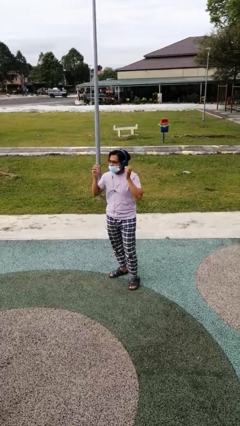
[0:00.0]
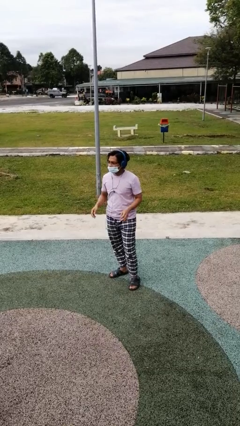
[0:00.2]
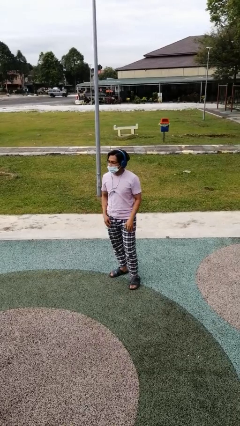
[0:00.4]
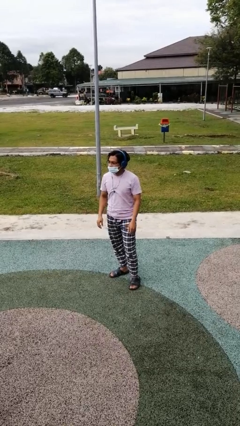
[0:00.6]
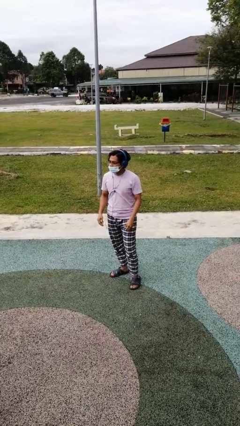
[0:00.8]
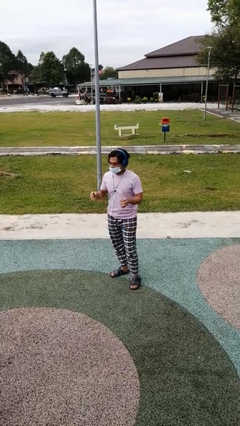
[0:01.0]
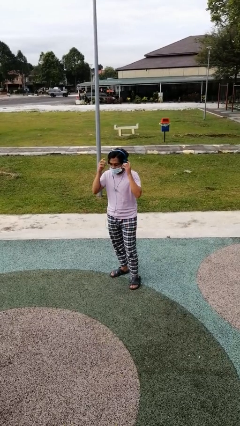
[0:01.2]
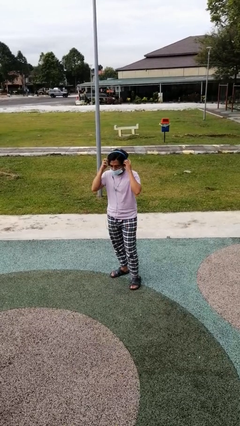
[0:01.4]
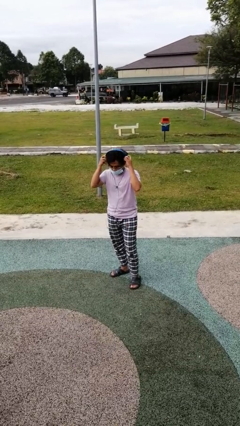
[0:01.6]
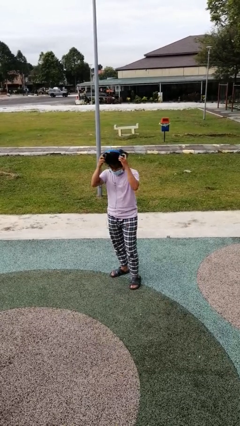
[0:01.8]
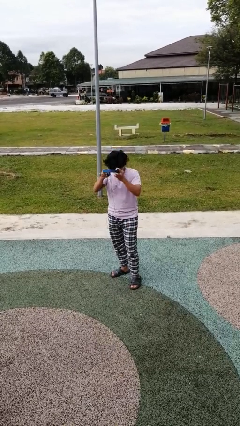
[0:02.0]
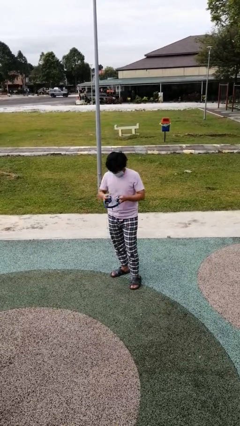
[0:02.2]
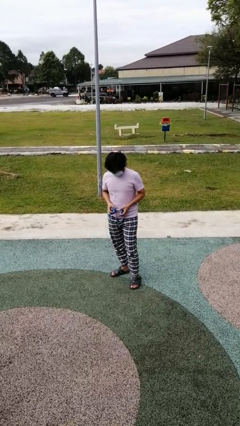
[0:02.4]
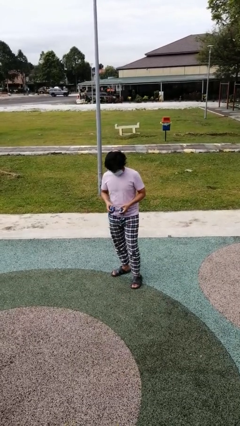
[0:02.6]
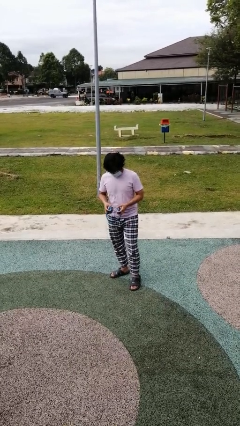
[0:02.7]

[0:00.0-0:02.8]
person takes off headphones

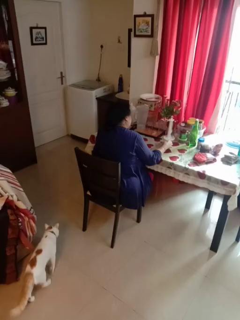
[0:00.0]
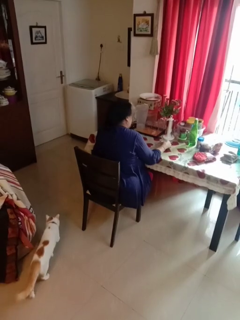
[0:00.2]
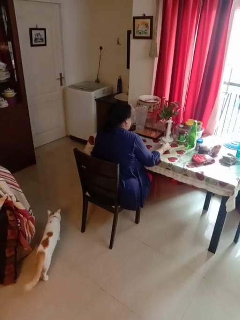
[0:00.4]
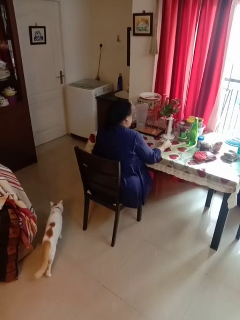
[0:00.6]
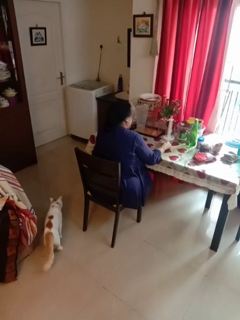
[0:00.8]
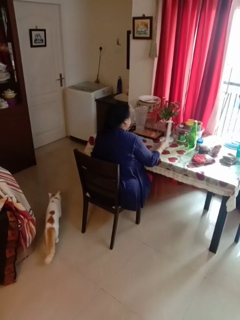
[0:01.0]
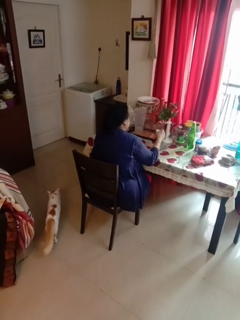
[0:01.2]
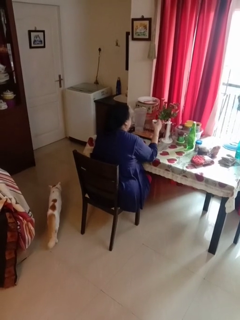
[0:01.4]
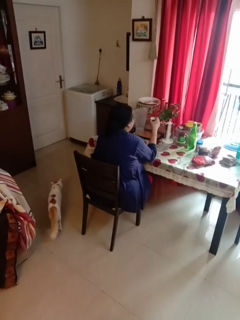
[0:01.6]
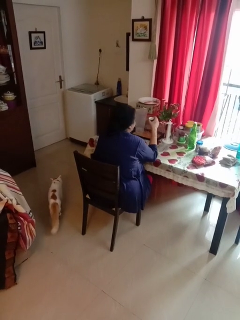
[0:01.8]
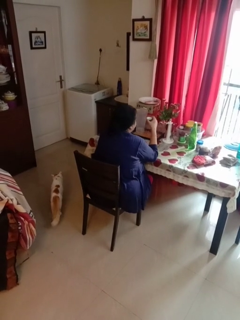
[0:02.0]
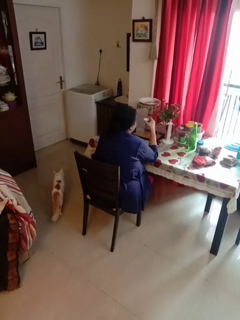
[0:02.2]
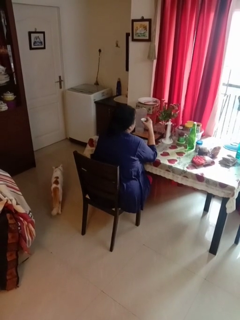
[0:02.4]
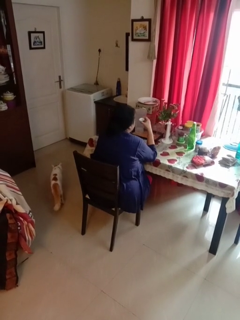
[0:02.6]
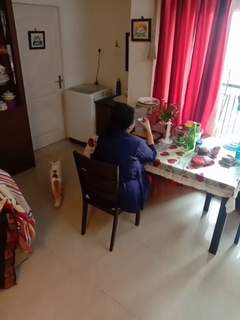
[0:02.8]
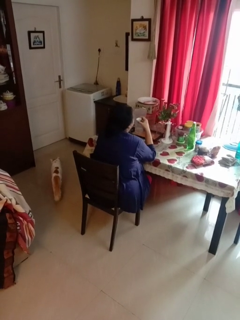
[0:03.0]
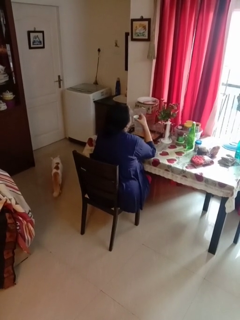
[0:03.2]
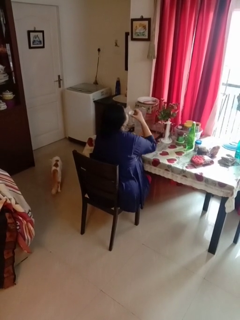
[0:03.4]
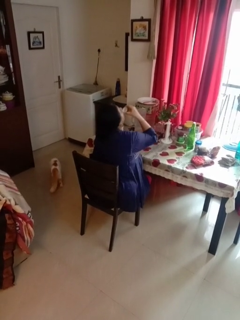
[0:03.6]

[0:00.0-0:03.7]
person picks up object from table

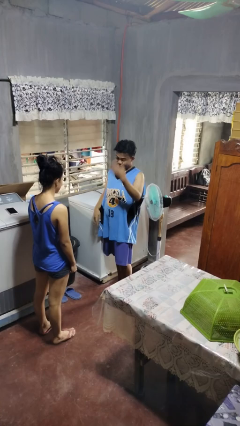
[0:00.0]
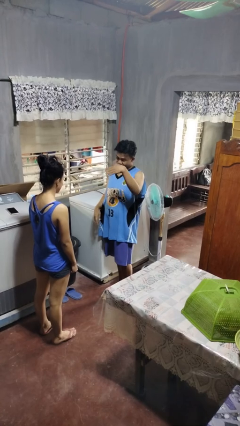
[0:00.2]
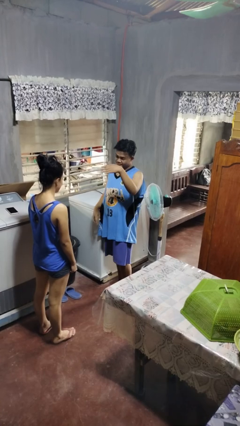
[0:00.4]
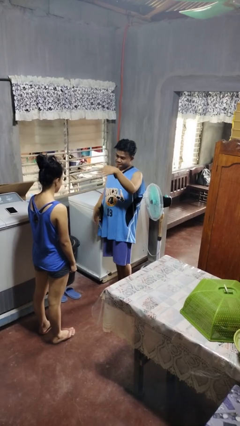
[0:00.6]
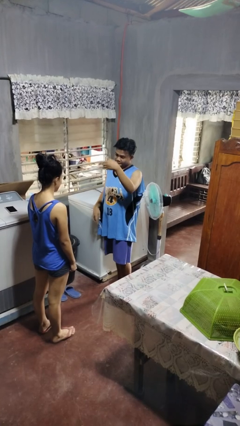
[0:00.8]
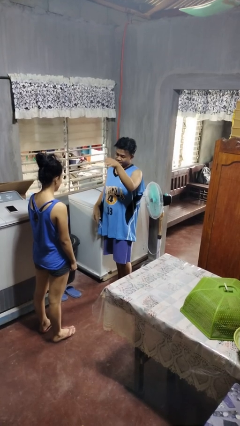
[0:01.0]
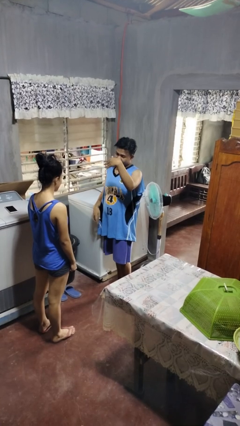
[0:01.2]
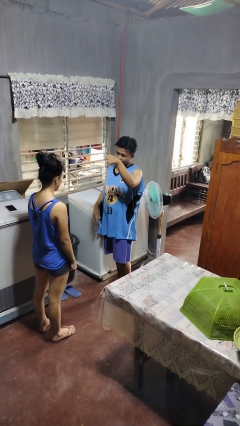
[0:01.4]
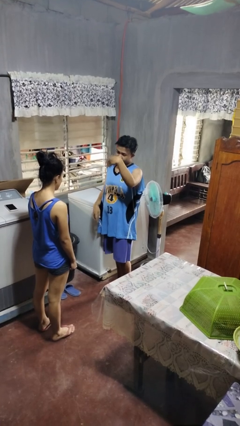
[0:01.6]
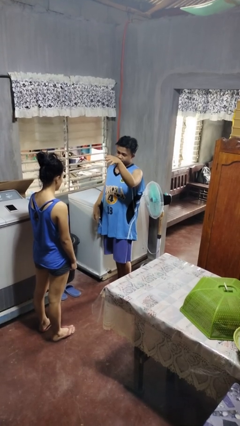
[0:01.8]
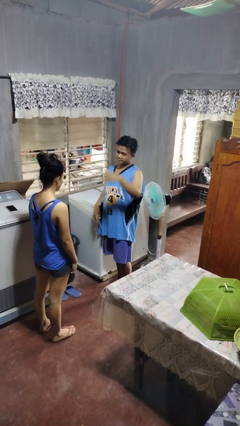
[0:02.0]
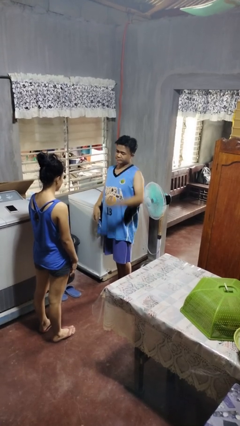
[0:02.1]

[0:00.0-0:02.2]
person shoves person

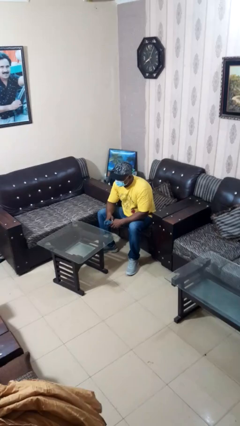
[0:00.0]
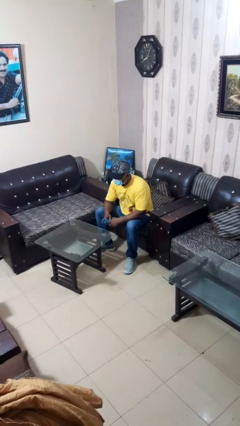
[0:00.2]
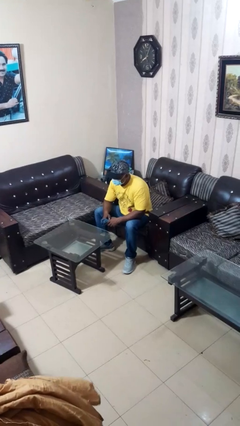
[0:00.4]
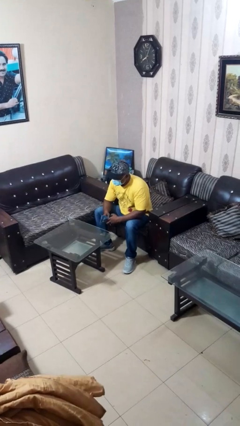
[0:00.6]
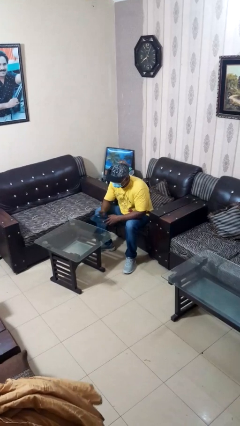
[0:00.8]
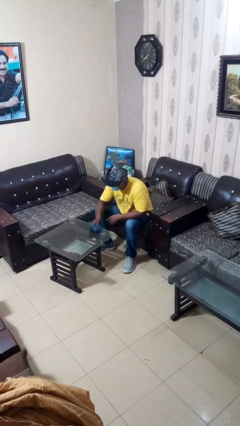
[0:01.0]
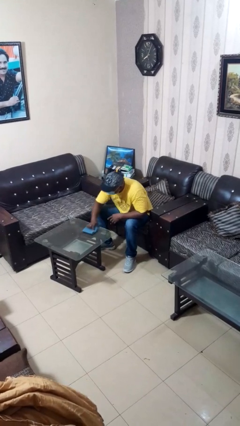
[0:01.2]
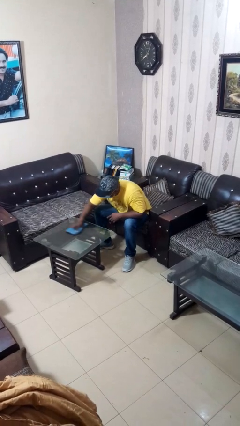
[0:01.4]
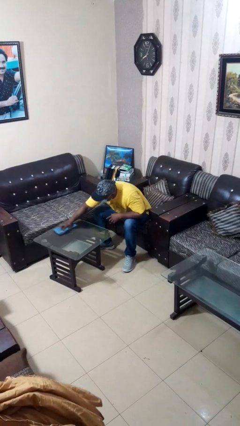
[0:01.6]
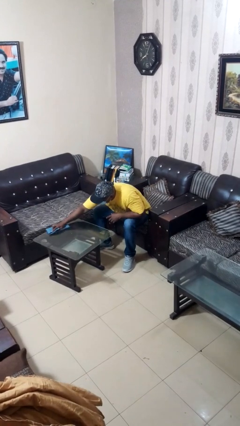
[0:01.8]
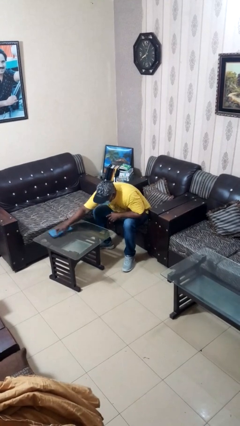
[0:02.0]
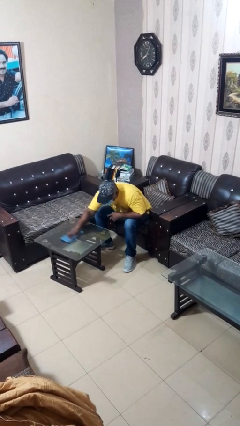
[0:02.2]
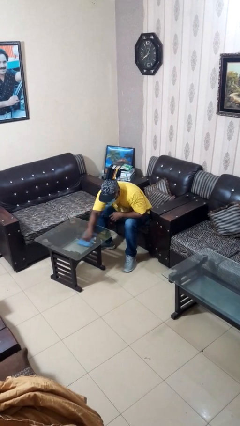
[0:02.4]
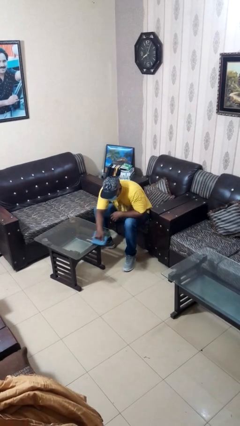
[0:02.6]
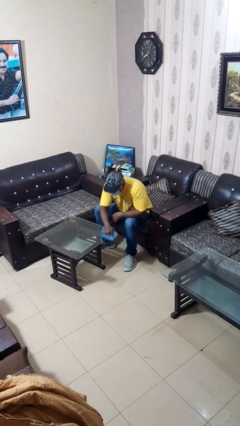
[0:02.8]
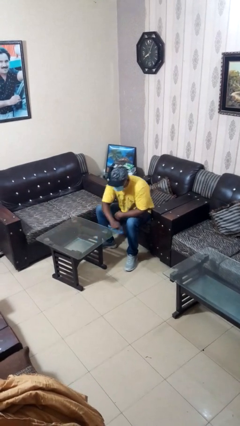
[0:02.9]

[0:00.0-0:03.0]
person cleans table with rag

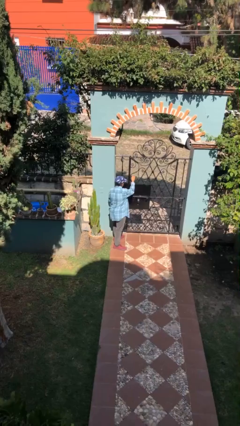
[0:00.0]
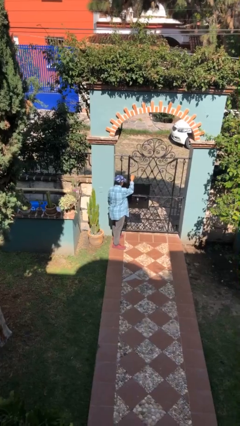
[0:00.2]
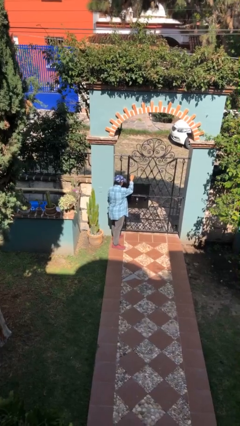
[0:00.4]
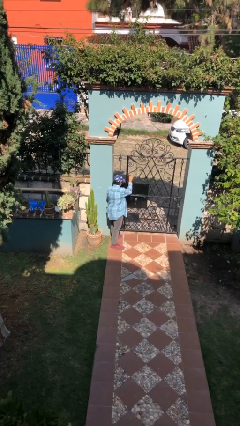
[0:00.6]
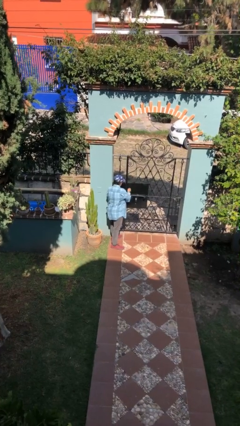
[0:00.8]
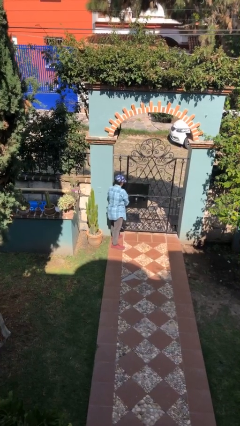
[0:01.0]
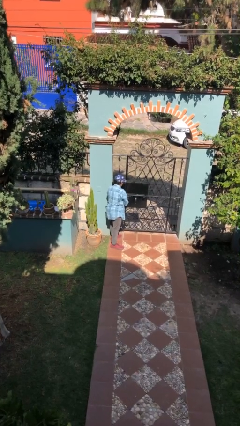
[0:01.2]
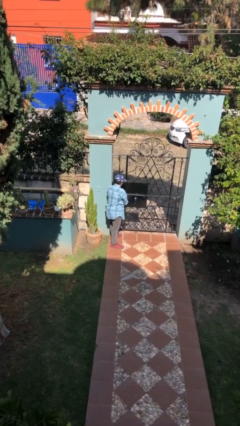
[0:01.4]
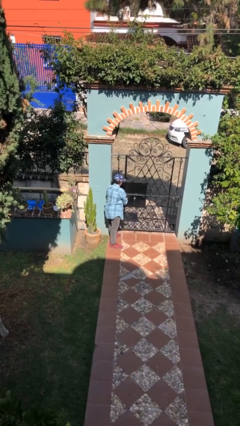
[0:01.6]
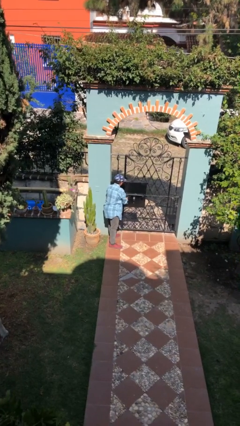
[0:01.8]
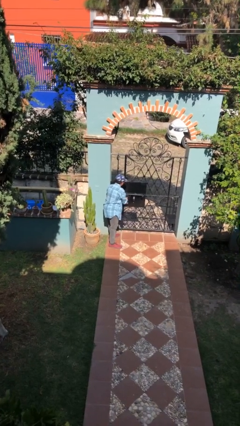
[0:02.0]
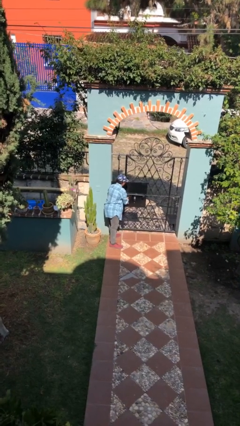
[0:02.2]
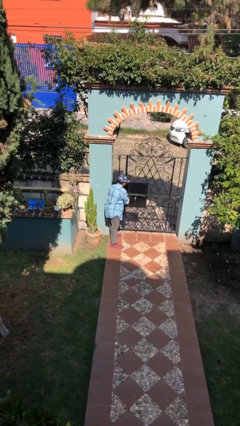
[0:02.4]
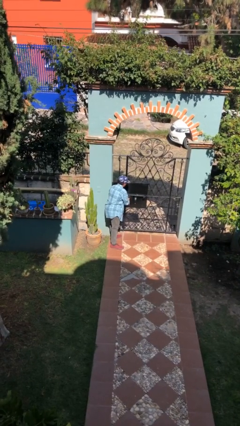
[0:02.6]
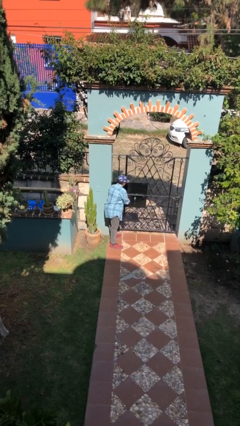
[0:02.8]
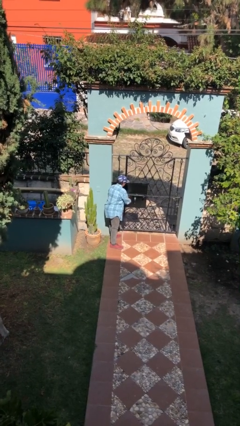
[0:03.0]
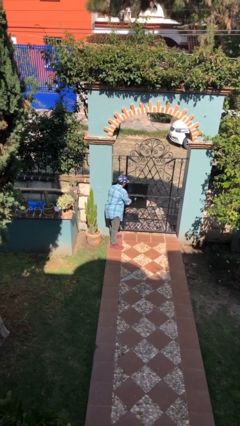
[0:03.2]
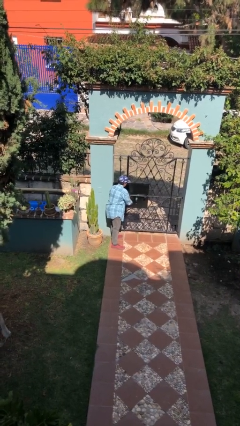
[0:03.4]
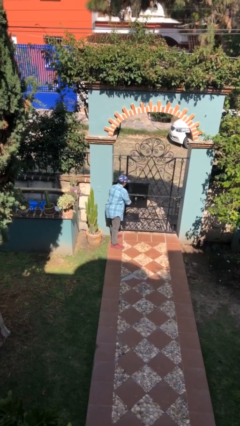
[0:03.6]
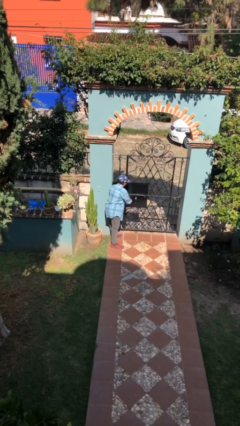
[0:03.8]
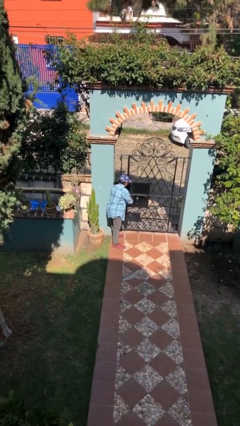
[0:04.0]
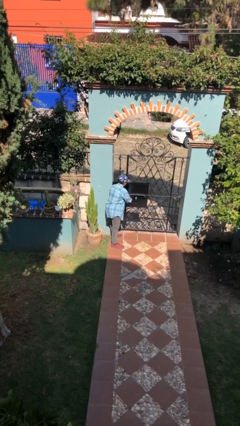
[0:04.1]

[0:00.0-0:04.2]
person locks door with keys

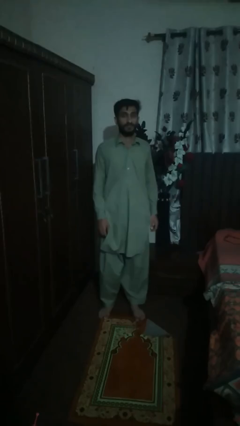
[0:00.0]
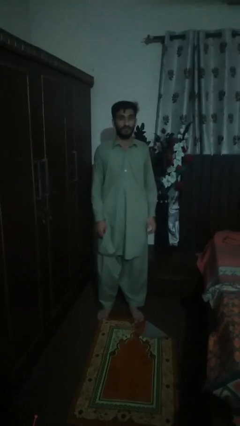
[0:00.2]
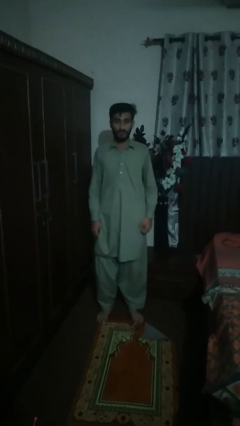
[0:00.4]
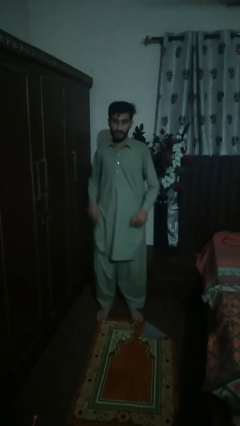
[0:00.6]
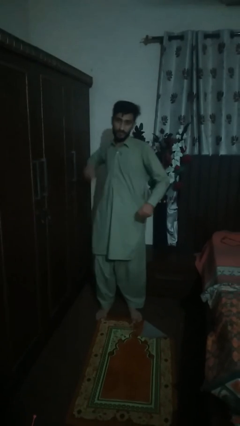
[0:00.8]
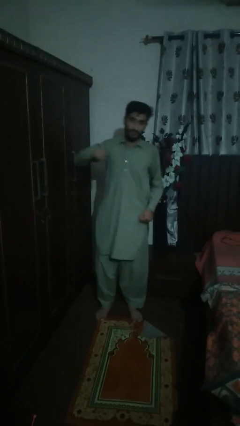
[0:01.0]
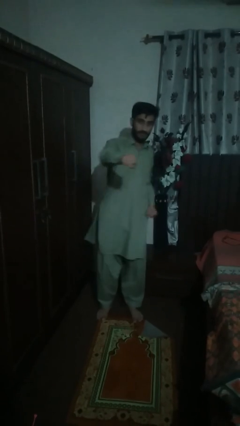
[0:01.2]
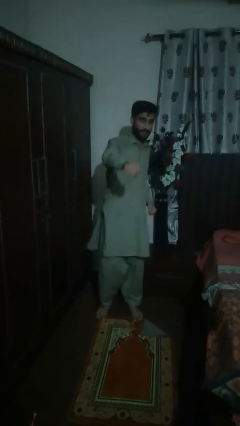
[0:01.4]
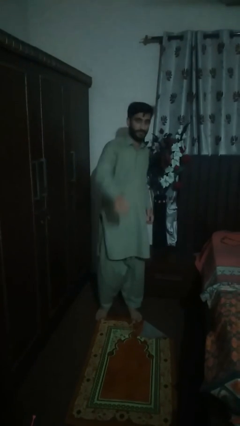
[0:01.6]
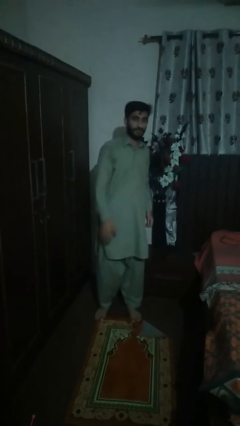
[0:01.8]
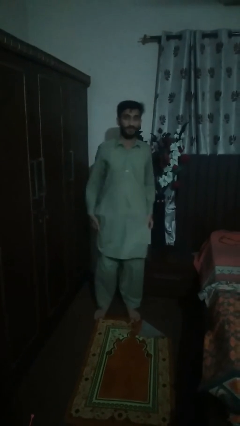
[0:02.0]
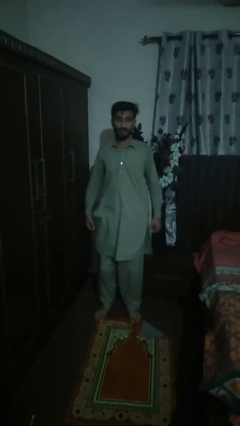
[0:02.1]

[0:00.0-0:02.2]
person karate chop
